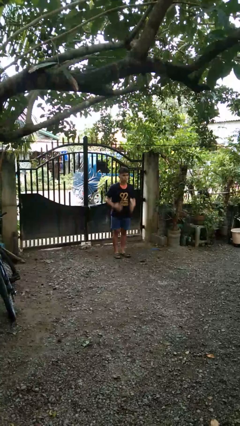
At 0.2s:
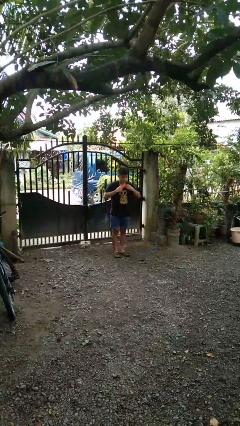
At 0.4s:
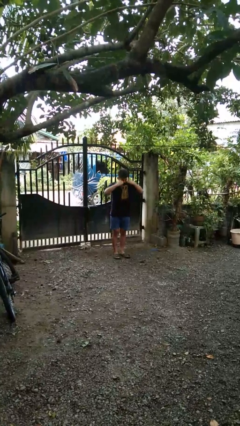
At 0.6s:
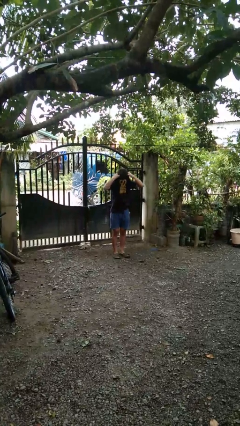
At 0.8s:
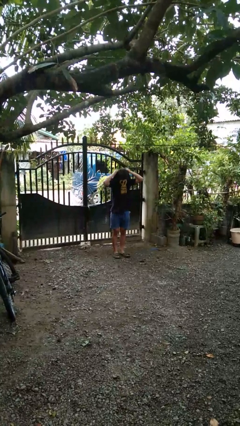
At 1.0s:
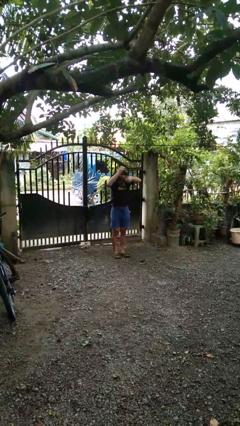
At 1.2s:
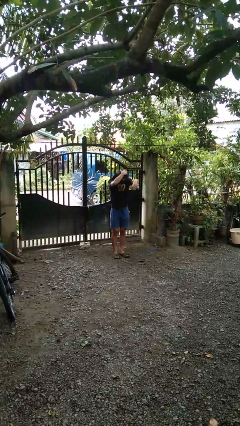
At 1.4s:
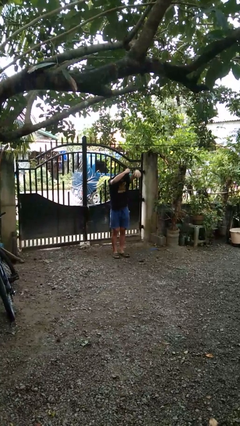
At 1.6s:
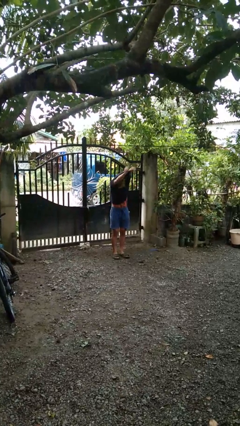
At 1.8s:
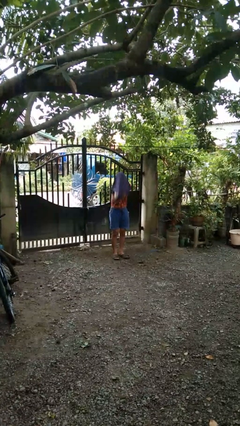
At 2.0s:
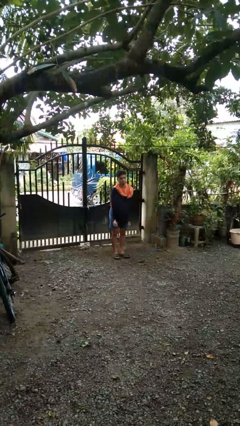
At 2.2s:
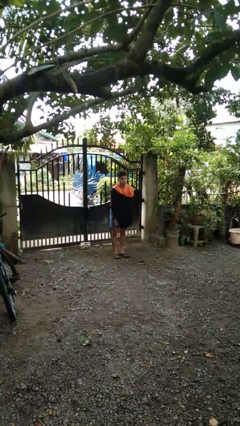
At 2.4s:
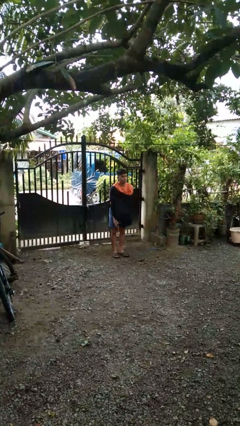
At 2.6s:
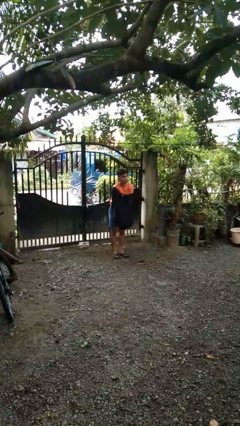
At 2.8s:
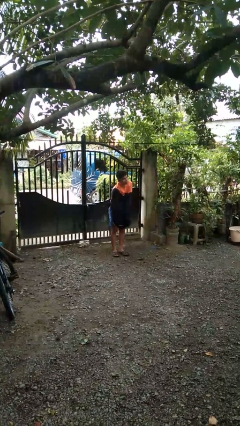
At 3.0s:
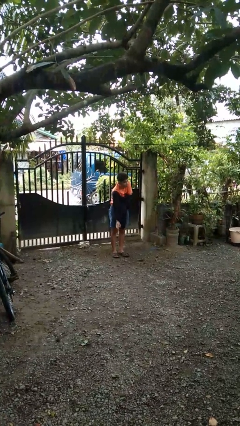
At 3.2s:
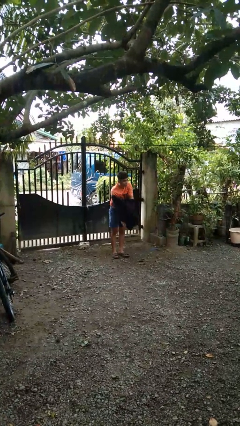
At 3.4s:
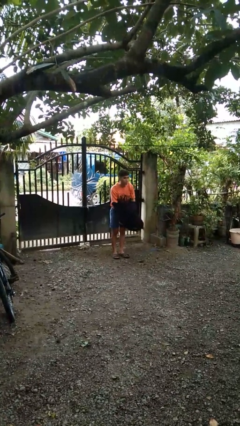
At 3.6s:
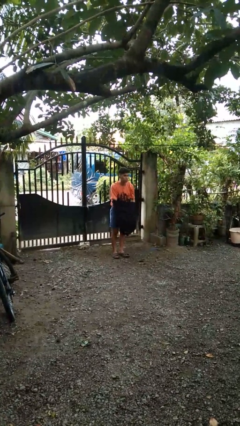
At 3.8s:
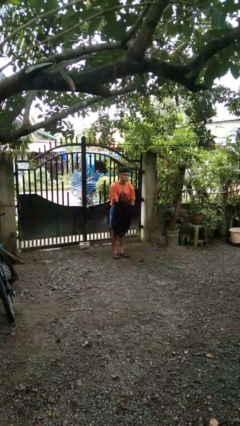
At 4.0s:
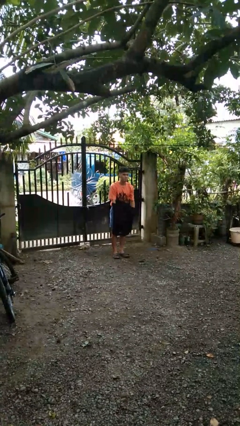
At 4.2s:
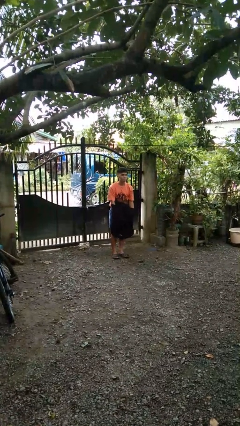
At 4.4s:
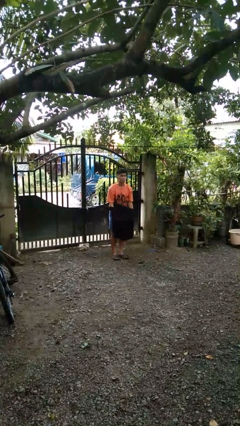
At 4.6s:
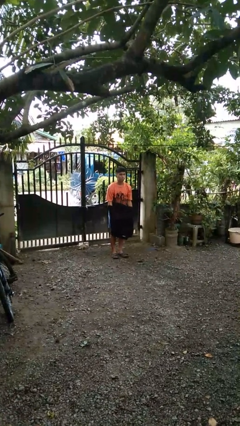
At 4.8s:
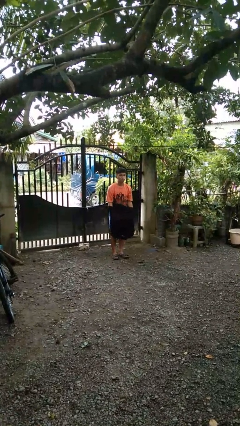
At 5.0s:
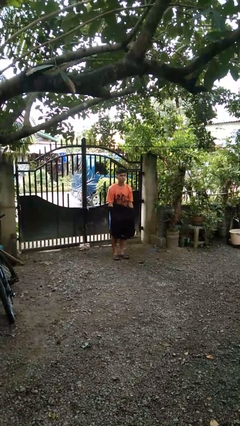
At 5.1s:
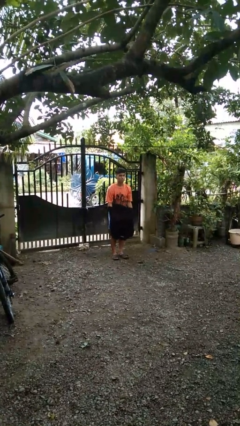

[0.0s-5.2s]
person takes off shirt

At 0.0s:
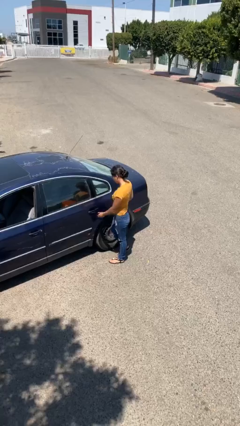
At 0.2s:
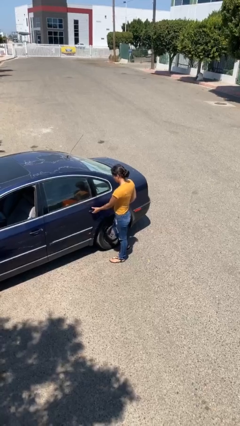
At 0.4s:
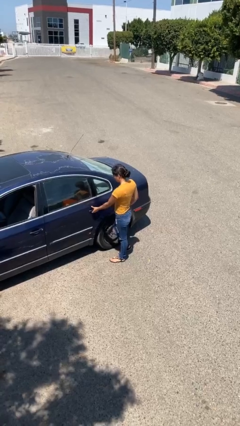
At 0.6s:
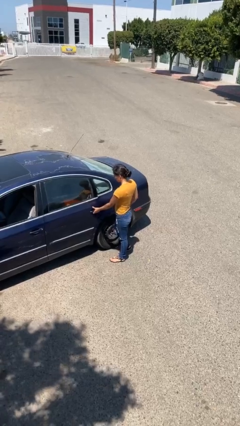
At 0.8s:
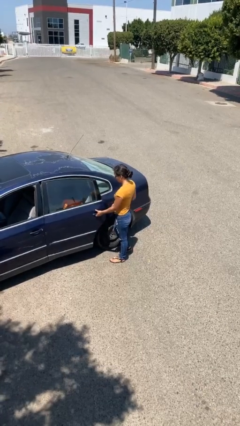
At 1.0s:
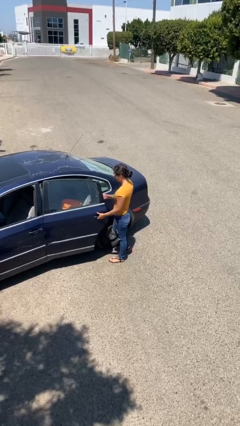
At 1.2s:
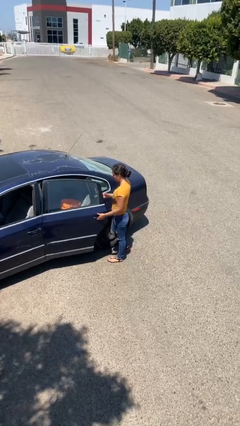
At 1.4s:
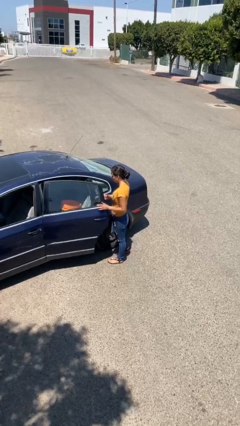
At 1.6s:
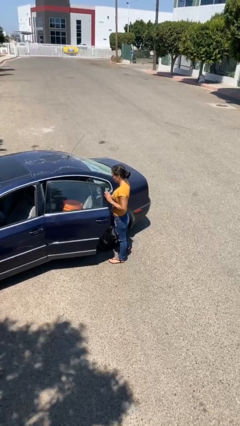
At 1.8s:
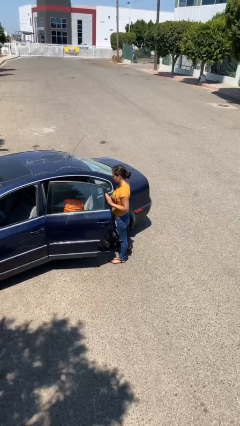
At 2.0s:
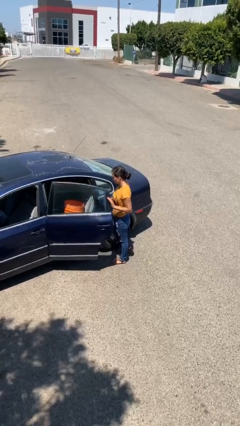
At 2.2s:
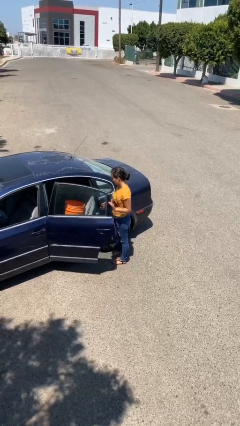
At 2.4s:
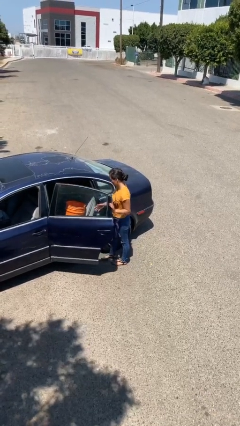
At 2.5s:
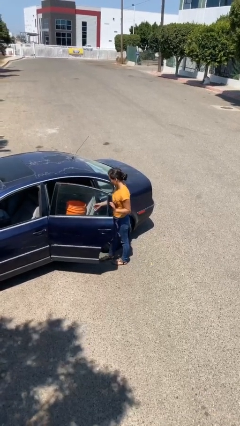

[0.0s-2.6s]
person opens car door

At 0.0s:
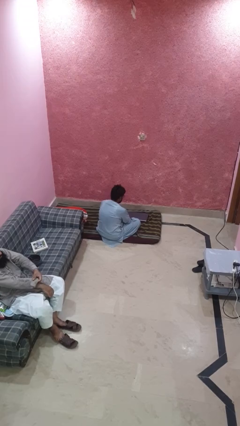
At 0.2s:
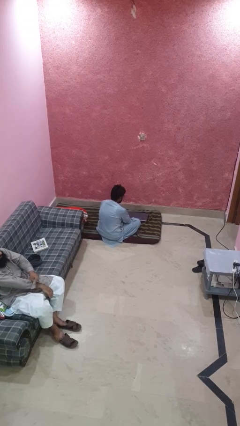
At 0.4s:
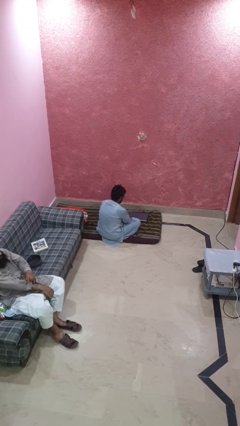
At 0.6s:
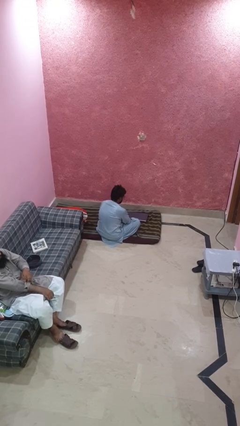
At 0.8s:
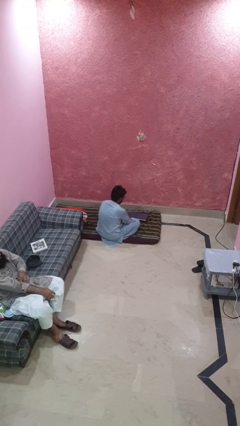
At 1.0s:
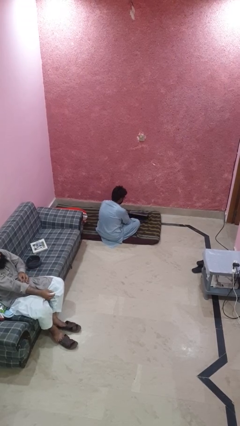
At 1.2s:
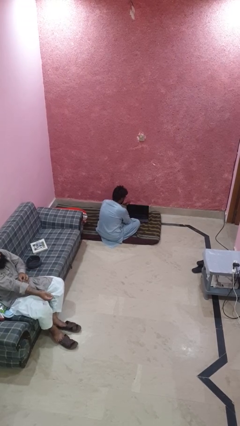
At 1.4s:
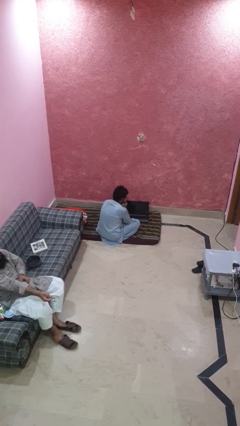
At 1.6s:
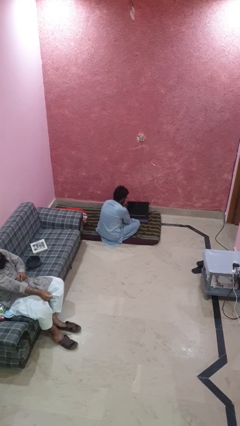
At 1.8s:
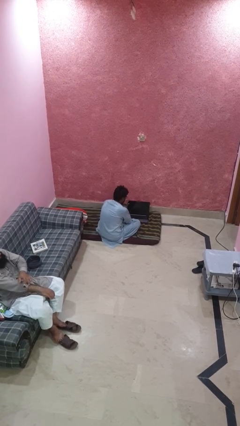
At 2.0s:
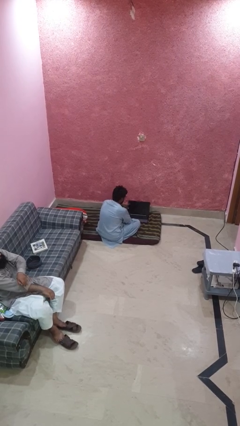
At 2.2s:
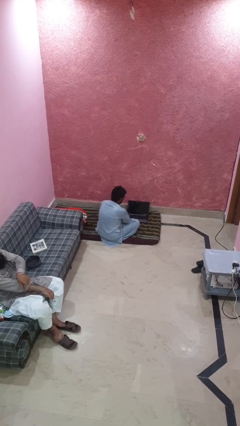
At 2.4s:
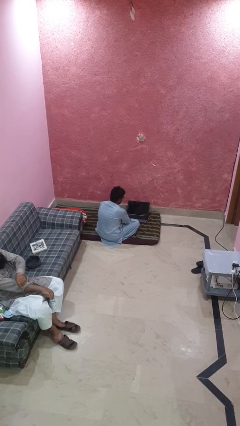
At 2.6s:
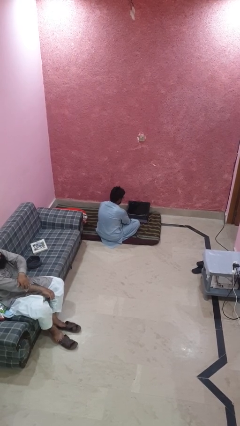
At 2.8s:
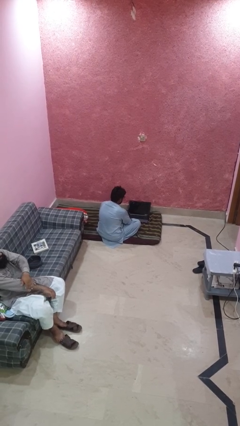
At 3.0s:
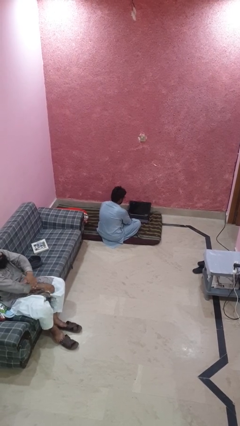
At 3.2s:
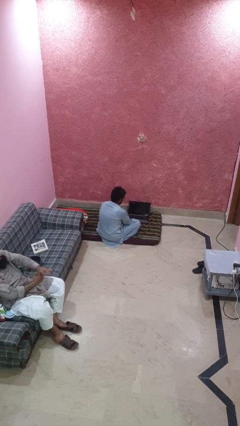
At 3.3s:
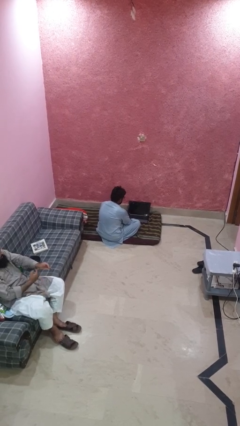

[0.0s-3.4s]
person opens laptop

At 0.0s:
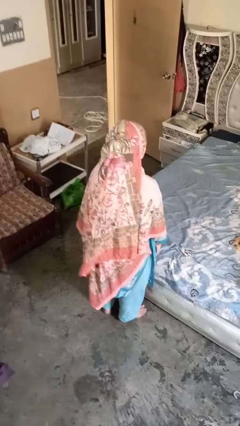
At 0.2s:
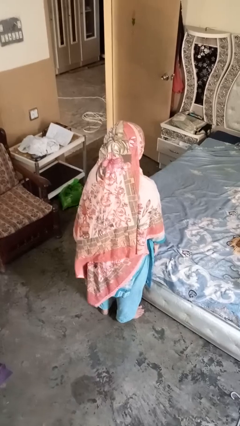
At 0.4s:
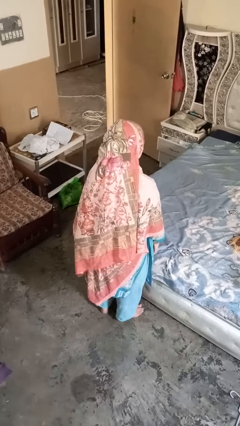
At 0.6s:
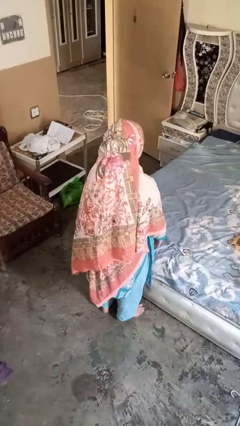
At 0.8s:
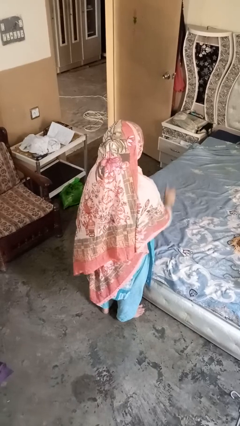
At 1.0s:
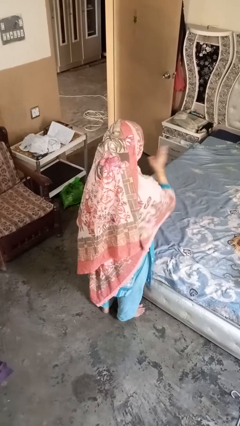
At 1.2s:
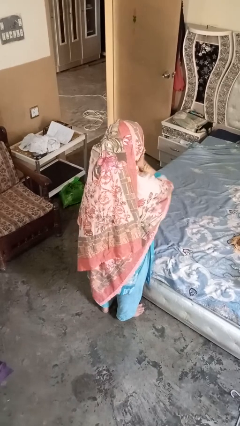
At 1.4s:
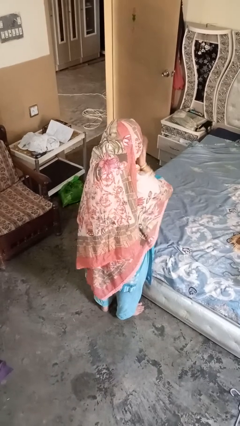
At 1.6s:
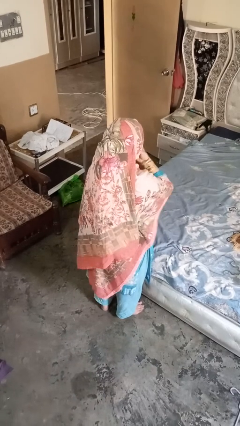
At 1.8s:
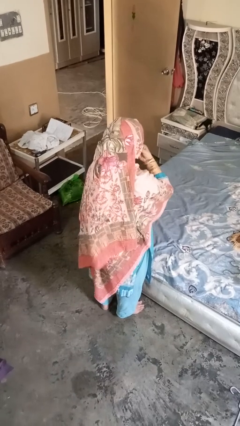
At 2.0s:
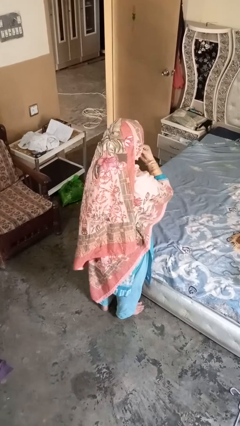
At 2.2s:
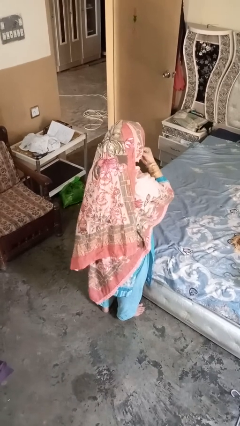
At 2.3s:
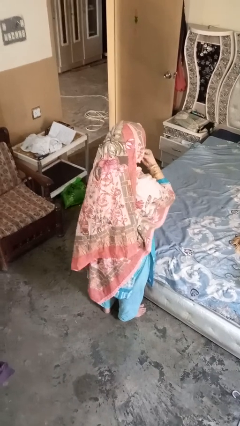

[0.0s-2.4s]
person strokes chin

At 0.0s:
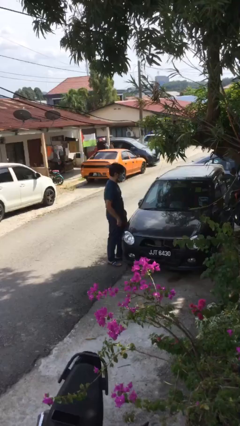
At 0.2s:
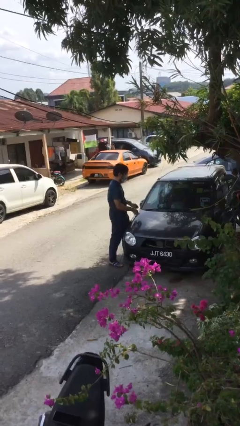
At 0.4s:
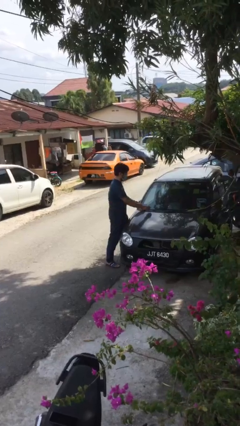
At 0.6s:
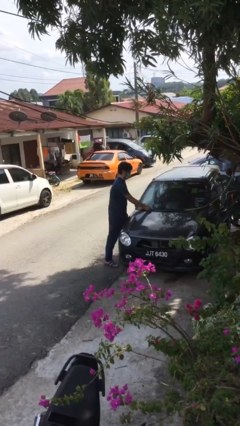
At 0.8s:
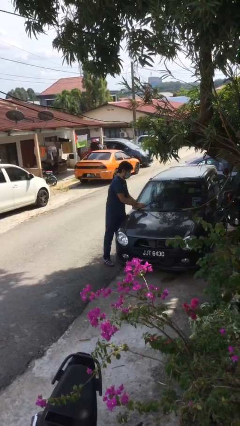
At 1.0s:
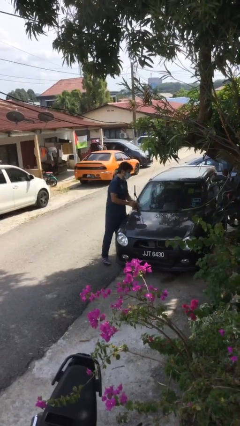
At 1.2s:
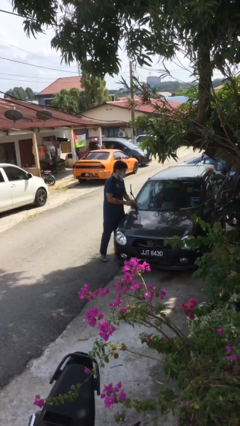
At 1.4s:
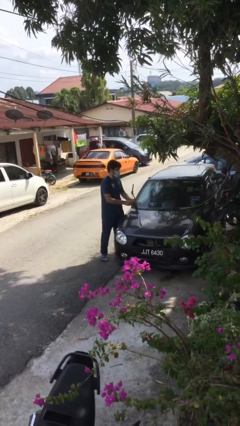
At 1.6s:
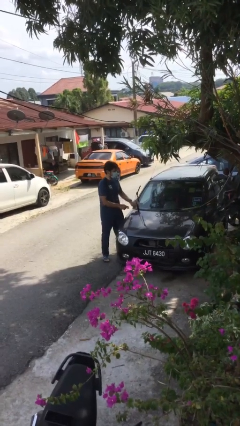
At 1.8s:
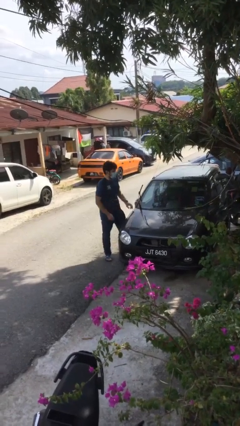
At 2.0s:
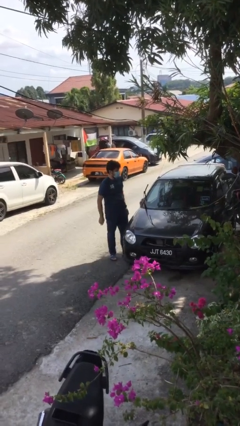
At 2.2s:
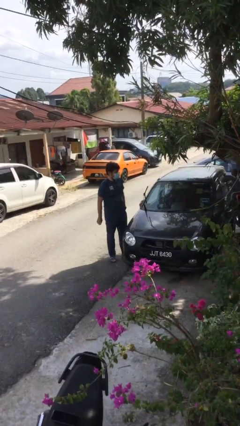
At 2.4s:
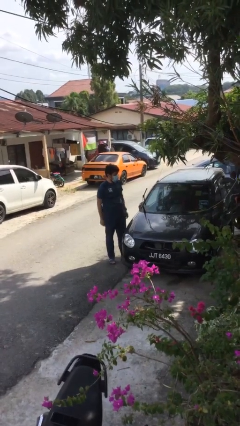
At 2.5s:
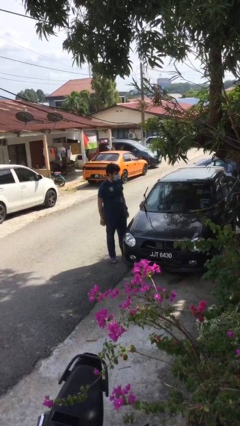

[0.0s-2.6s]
person flips up car wipers

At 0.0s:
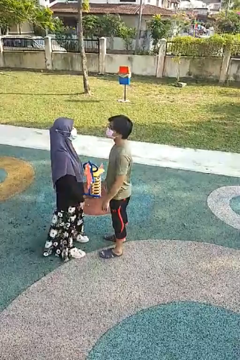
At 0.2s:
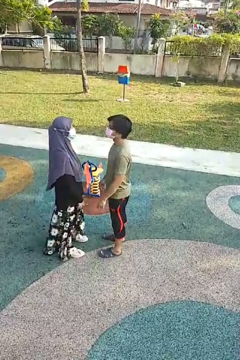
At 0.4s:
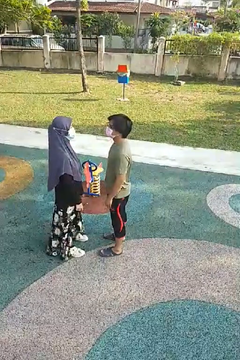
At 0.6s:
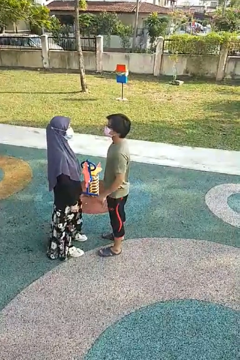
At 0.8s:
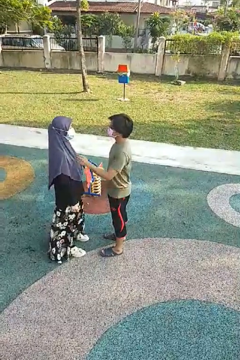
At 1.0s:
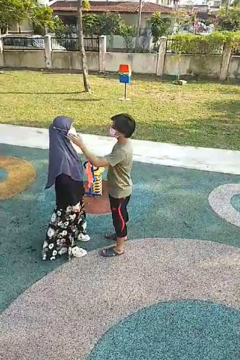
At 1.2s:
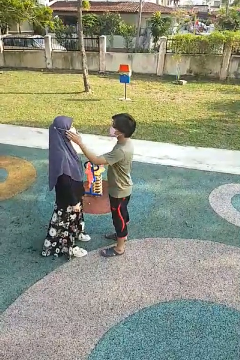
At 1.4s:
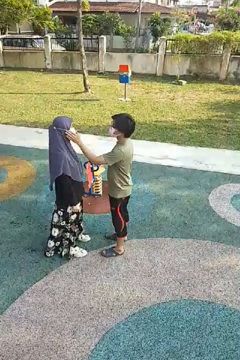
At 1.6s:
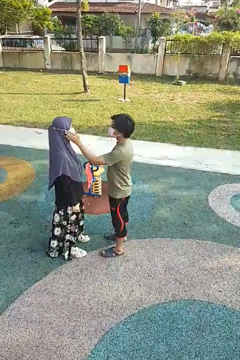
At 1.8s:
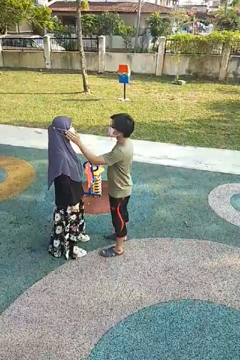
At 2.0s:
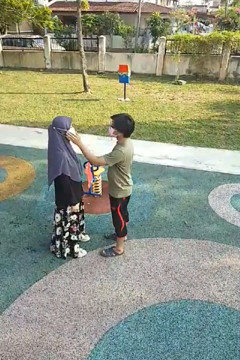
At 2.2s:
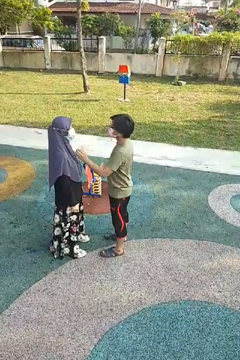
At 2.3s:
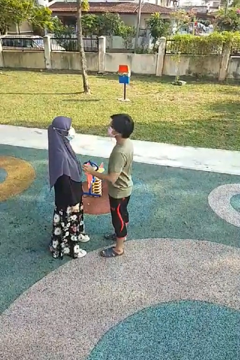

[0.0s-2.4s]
person touches face of person
